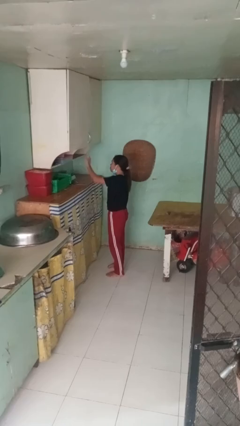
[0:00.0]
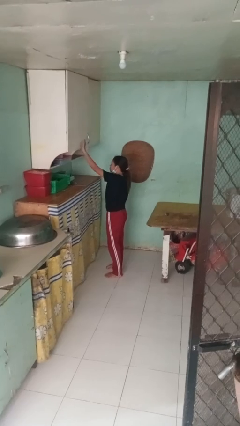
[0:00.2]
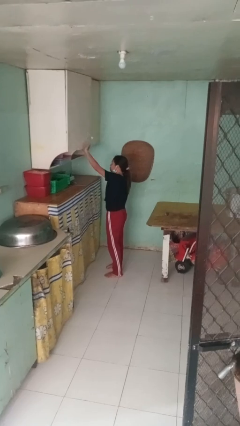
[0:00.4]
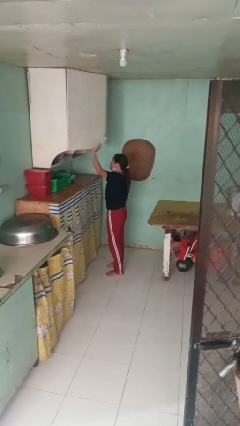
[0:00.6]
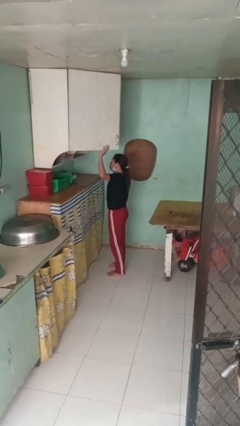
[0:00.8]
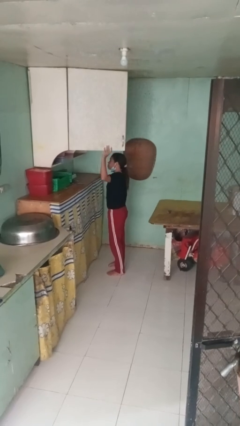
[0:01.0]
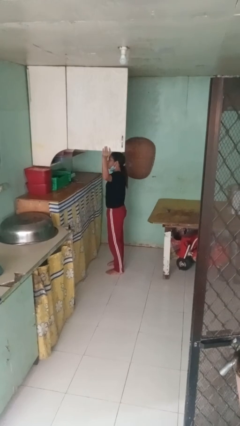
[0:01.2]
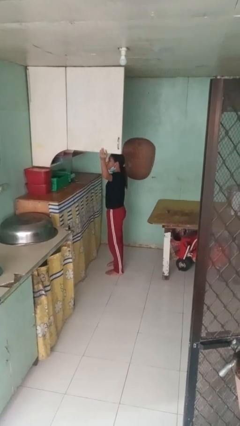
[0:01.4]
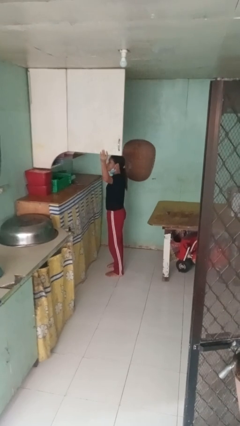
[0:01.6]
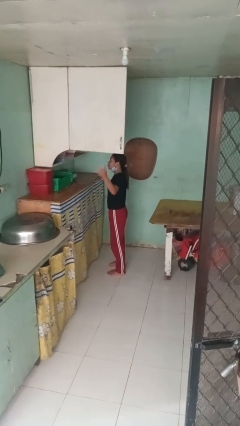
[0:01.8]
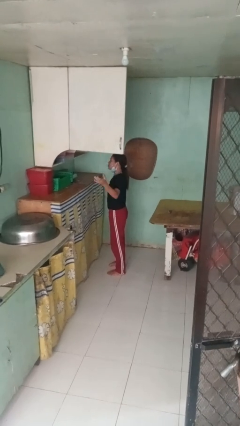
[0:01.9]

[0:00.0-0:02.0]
person opens cabinet

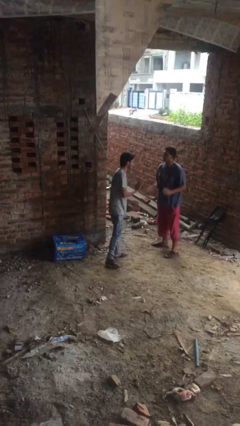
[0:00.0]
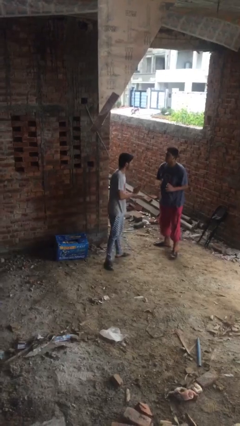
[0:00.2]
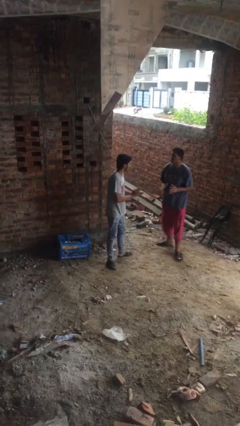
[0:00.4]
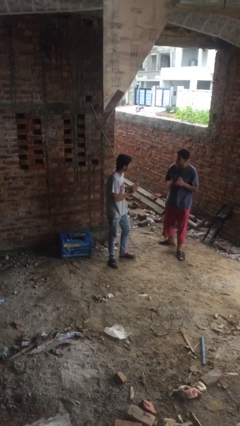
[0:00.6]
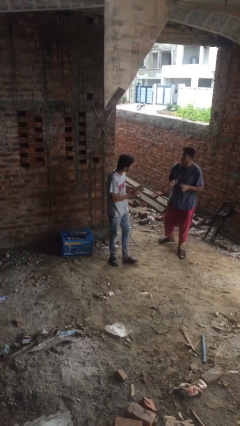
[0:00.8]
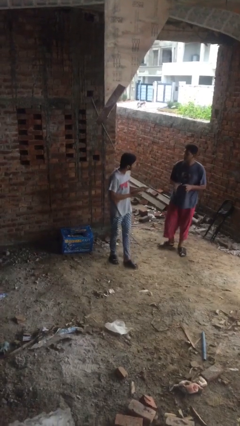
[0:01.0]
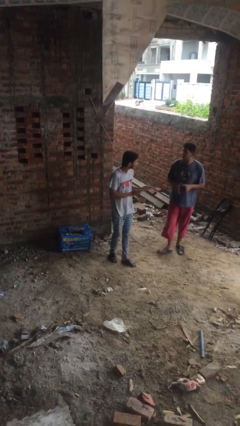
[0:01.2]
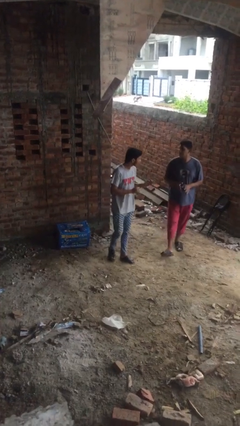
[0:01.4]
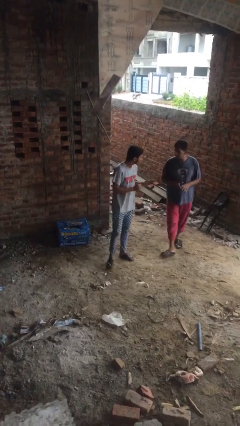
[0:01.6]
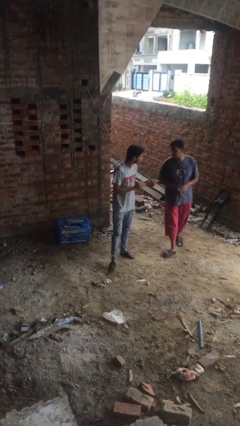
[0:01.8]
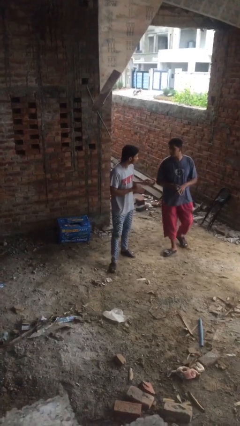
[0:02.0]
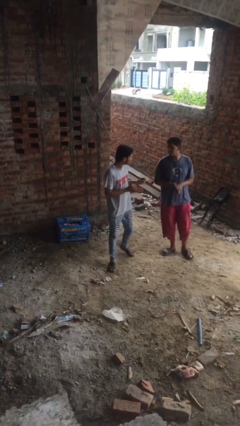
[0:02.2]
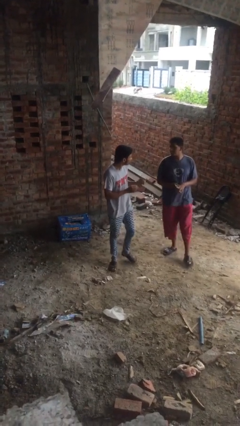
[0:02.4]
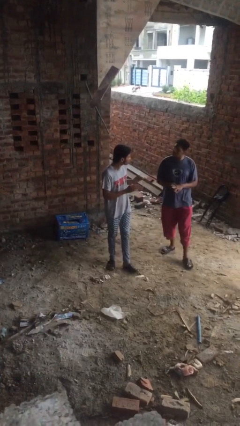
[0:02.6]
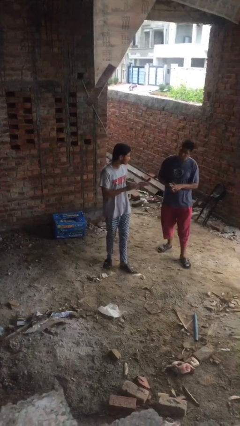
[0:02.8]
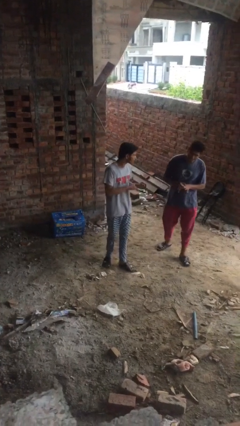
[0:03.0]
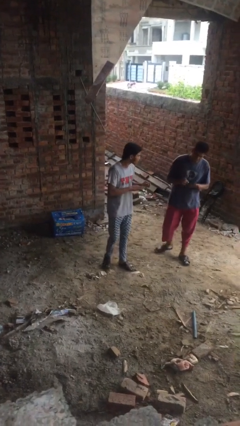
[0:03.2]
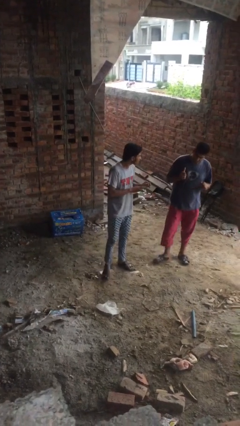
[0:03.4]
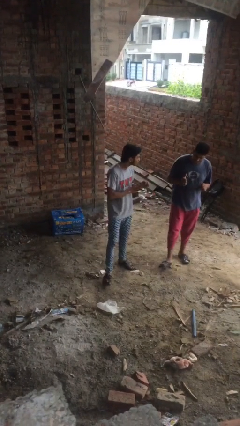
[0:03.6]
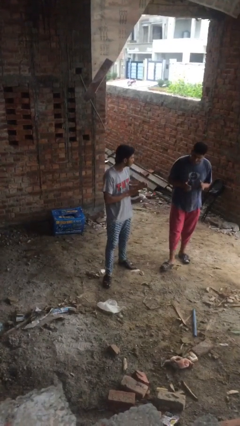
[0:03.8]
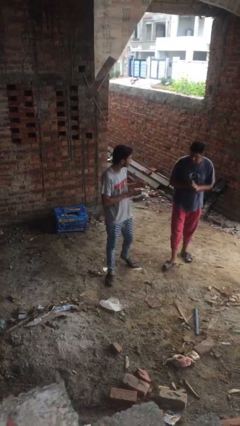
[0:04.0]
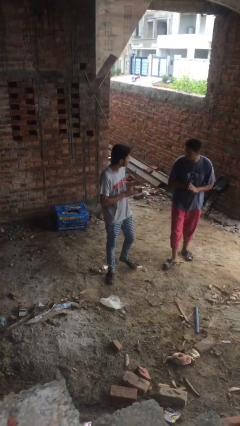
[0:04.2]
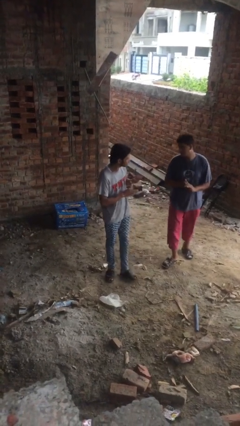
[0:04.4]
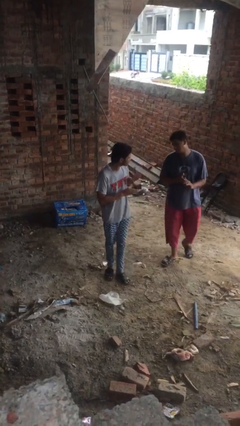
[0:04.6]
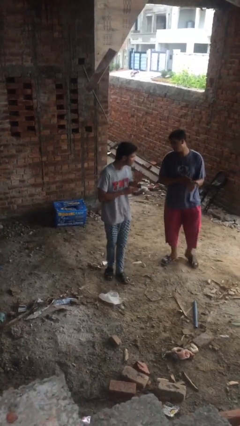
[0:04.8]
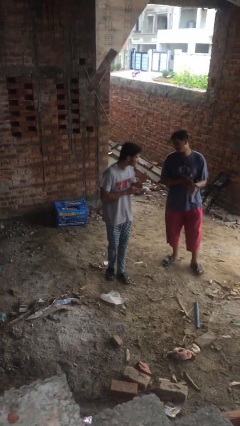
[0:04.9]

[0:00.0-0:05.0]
person talks to person

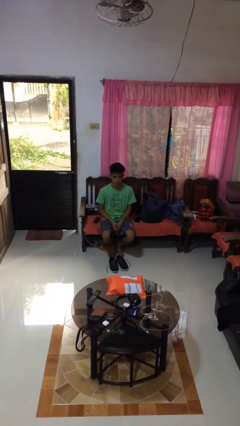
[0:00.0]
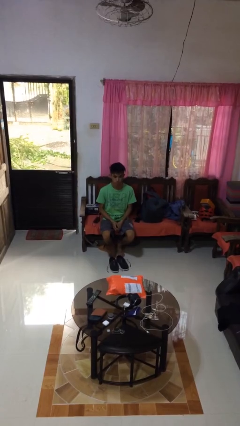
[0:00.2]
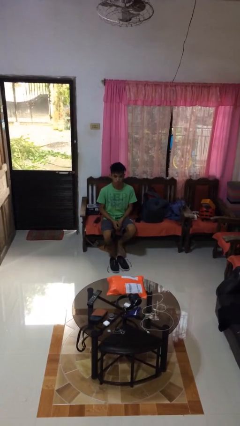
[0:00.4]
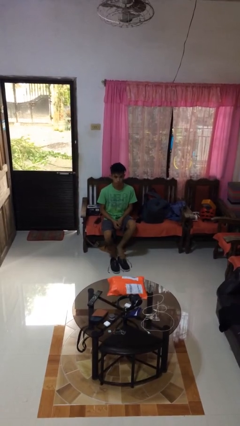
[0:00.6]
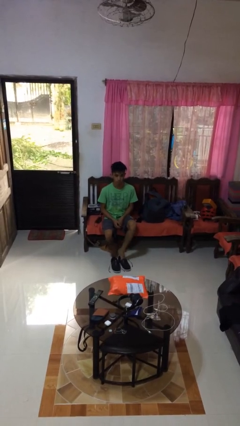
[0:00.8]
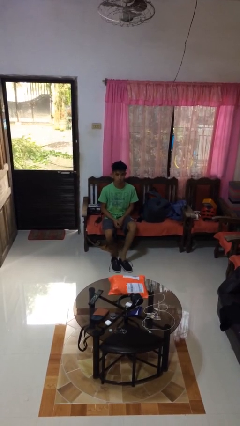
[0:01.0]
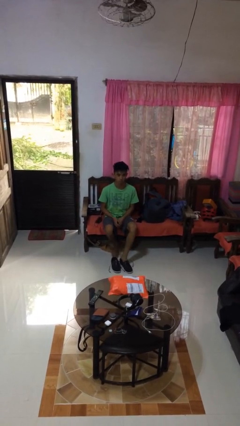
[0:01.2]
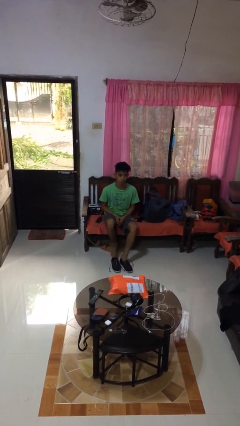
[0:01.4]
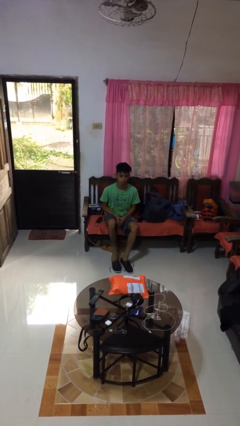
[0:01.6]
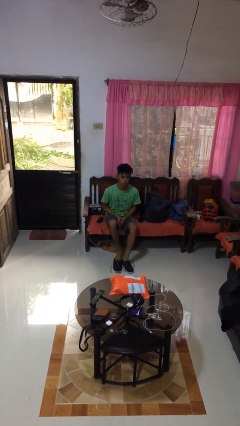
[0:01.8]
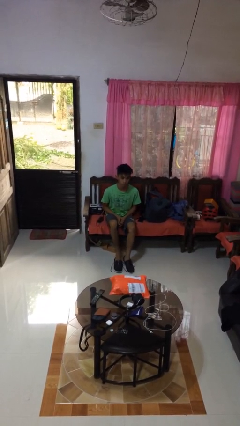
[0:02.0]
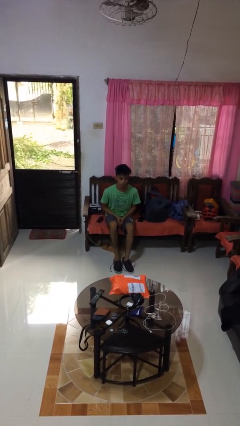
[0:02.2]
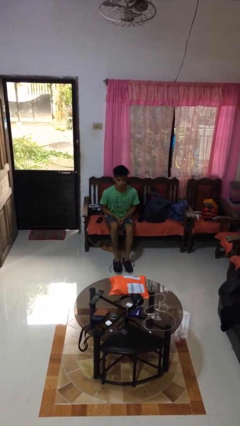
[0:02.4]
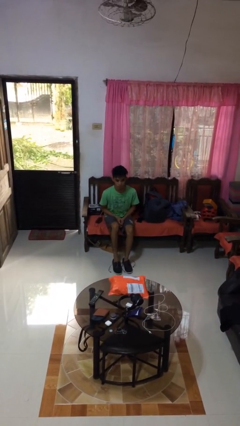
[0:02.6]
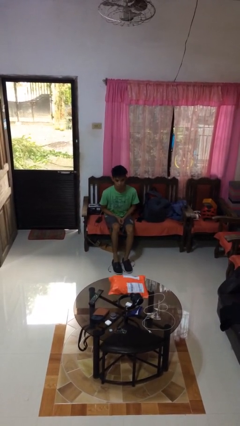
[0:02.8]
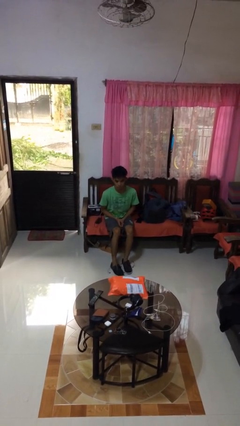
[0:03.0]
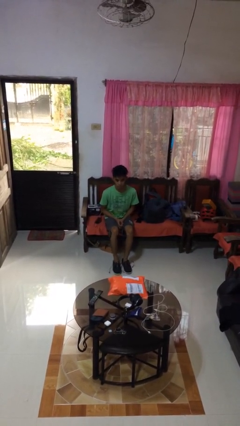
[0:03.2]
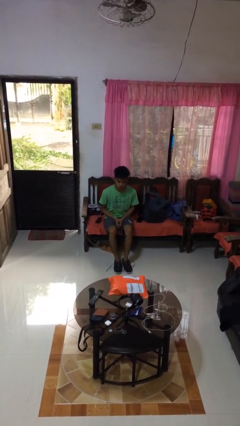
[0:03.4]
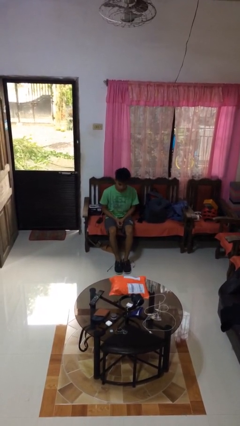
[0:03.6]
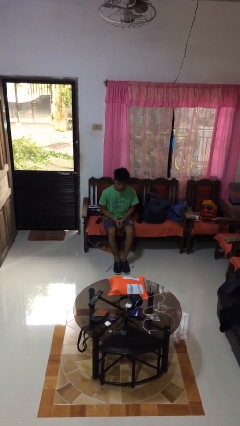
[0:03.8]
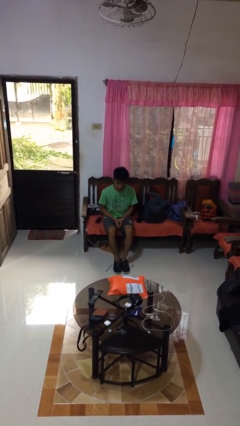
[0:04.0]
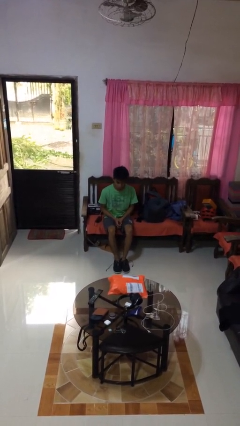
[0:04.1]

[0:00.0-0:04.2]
person puts on shoes

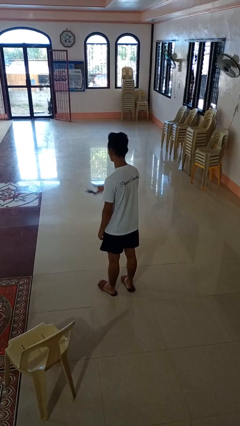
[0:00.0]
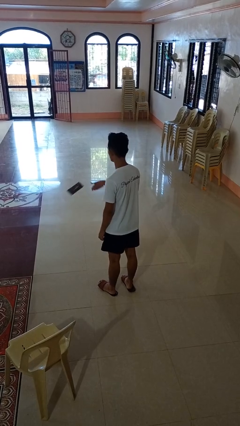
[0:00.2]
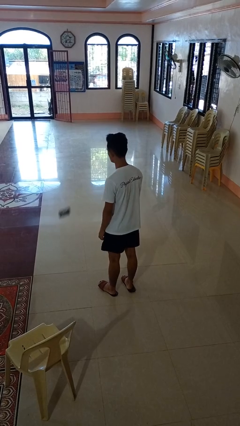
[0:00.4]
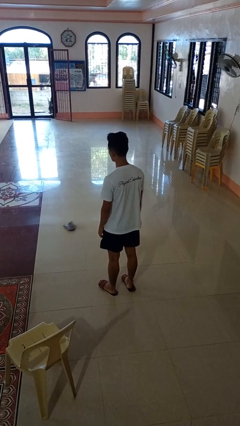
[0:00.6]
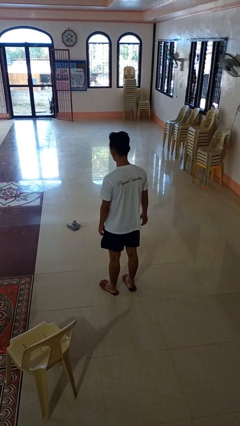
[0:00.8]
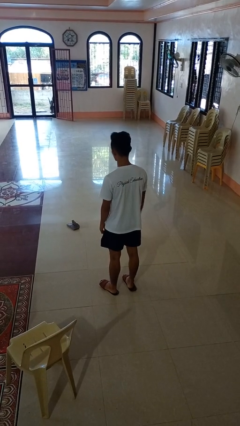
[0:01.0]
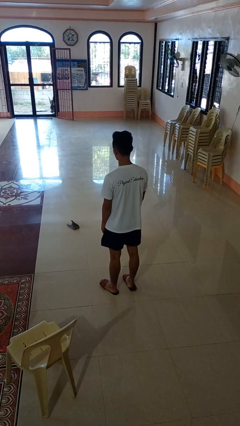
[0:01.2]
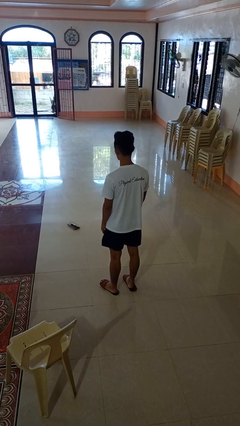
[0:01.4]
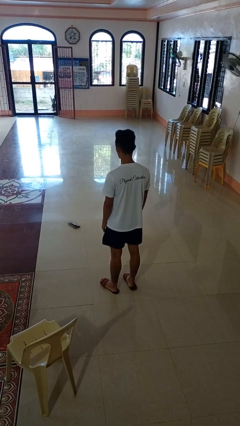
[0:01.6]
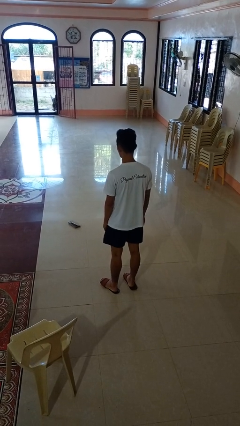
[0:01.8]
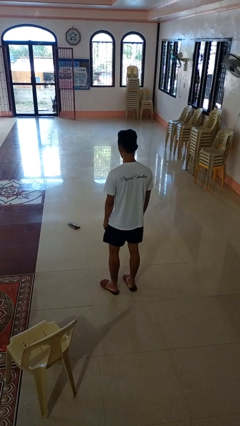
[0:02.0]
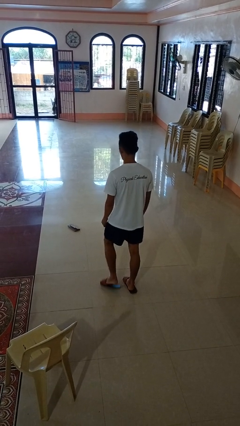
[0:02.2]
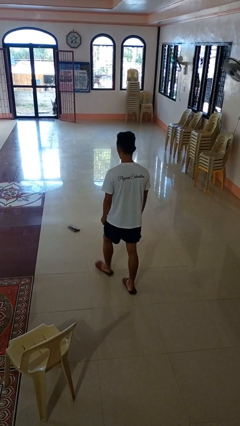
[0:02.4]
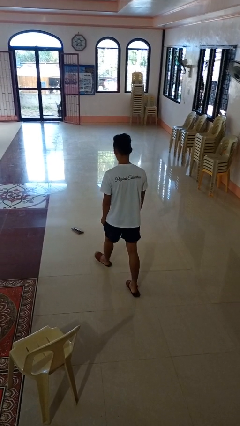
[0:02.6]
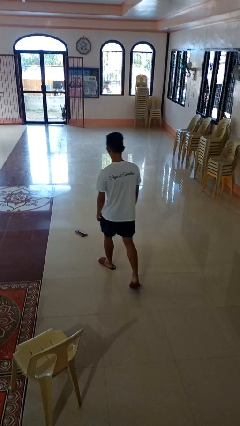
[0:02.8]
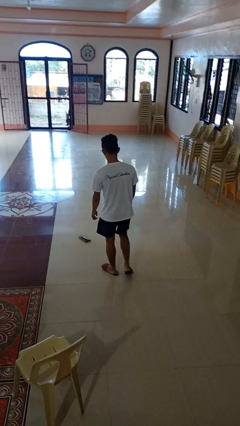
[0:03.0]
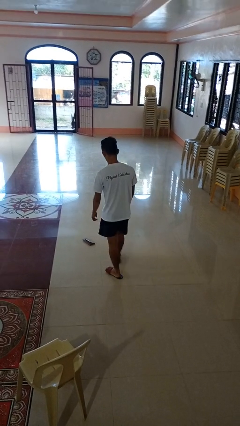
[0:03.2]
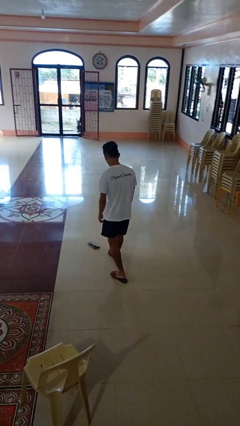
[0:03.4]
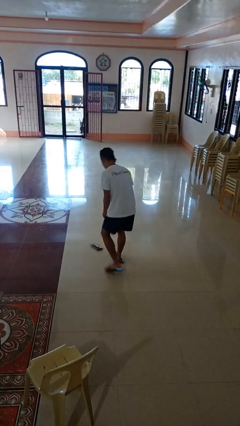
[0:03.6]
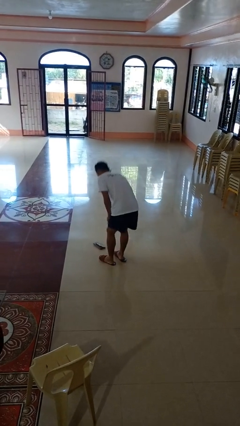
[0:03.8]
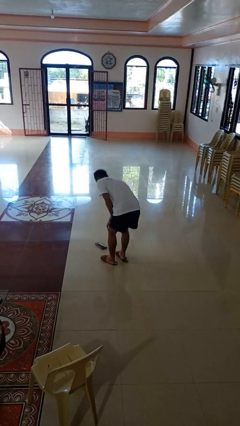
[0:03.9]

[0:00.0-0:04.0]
person throws object to ground

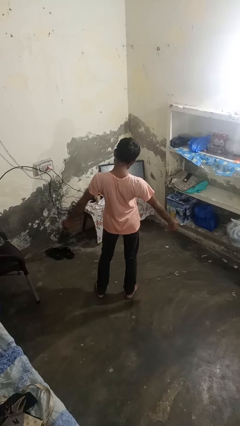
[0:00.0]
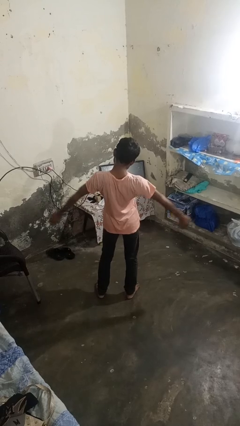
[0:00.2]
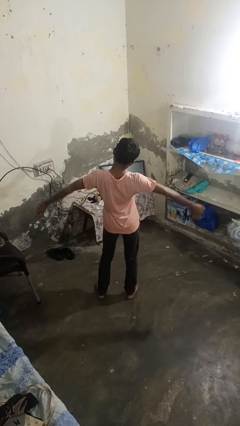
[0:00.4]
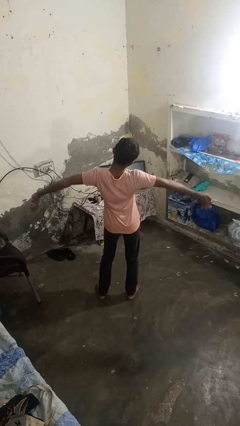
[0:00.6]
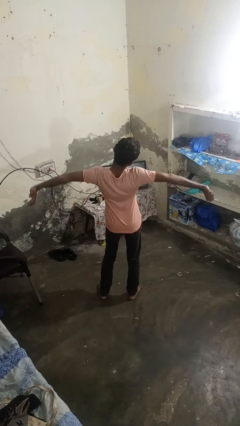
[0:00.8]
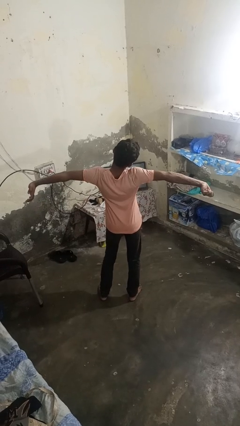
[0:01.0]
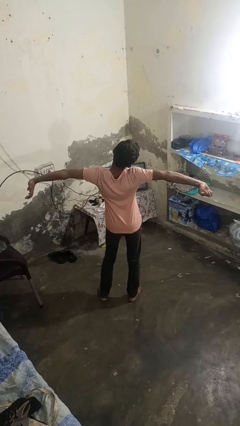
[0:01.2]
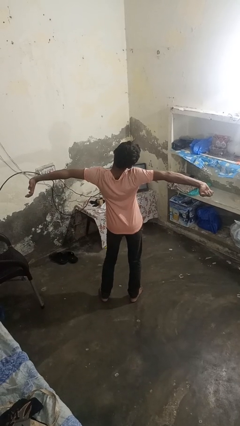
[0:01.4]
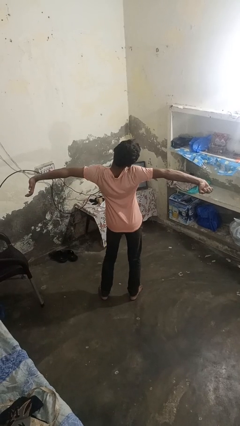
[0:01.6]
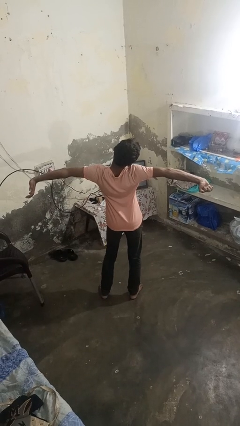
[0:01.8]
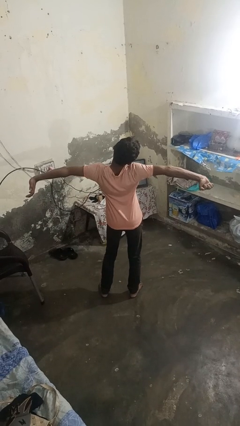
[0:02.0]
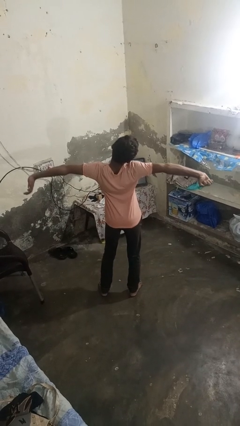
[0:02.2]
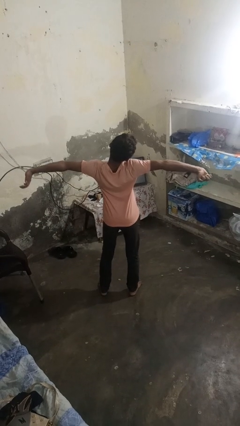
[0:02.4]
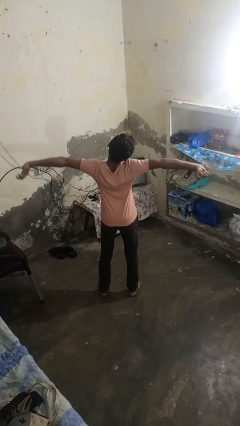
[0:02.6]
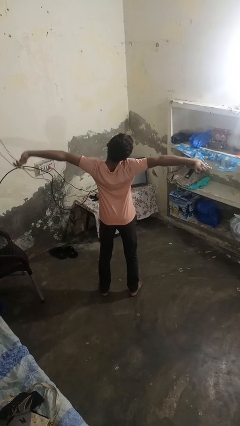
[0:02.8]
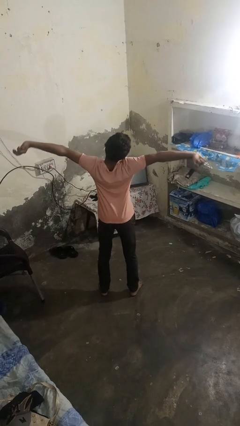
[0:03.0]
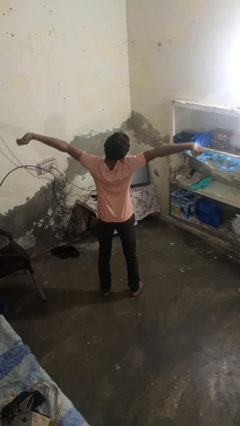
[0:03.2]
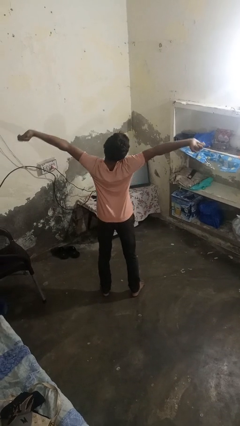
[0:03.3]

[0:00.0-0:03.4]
person stretches arms to side
